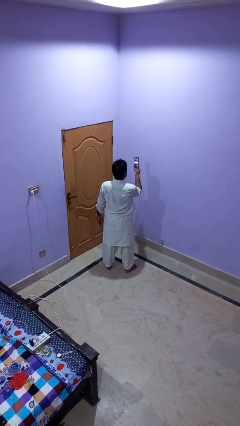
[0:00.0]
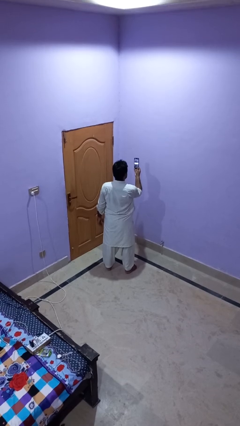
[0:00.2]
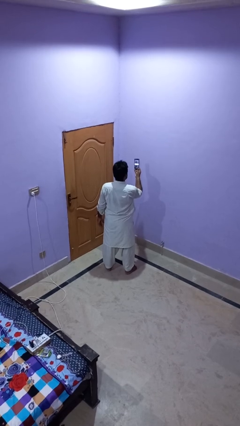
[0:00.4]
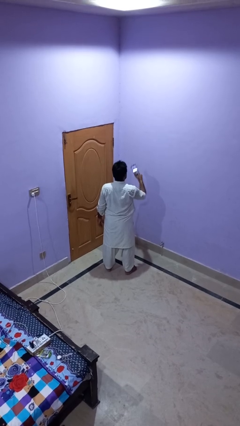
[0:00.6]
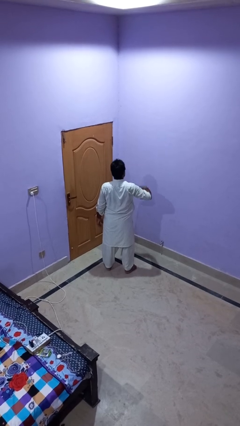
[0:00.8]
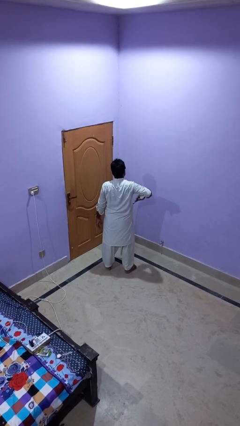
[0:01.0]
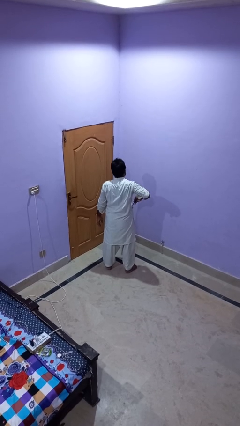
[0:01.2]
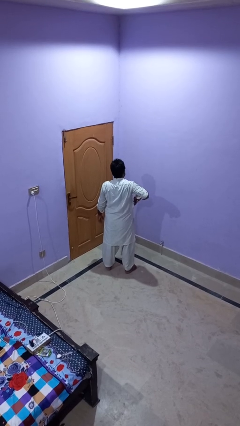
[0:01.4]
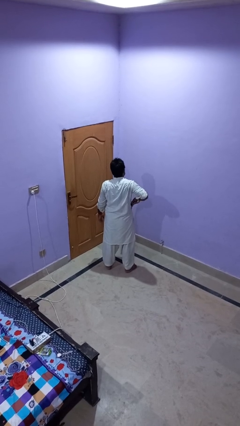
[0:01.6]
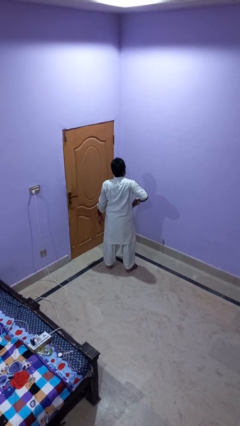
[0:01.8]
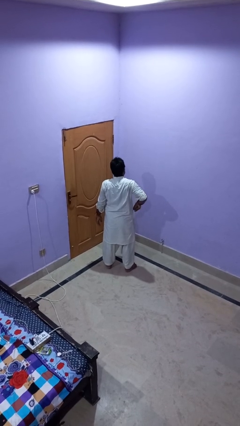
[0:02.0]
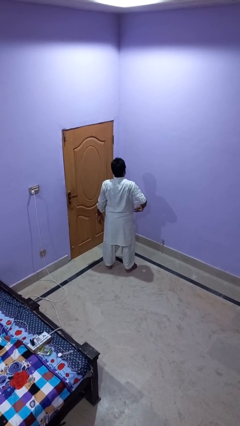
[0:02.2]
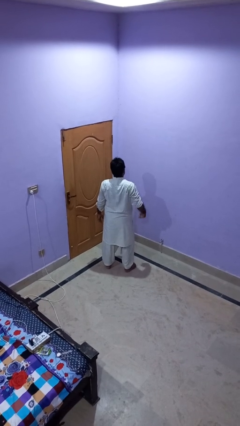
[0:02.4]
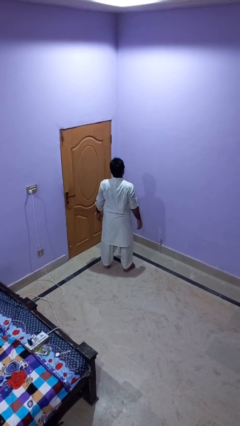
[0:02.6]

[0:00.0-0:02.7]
person puts phone into pocket

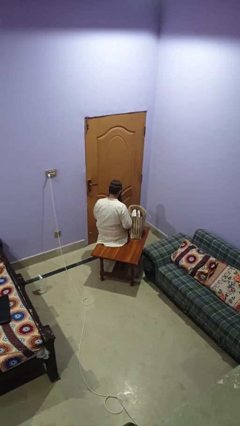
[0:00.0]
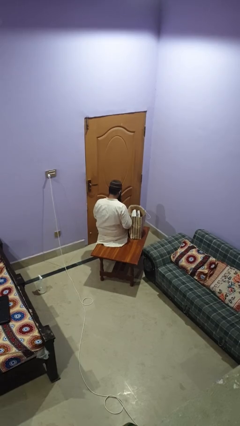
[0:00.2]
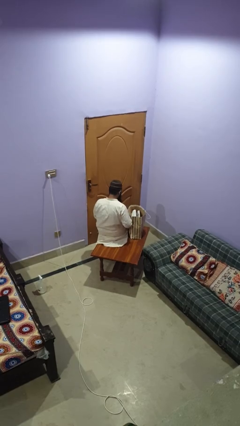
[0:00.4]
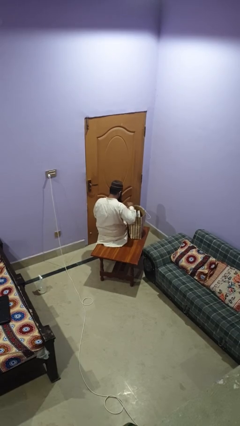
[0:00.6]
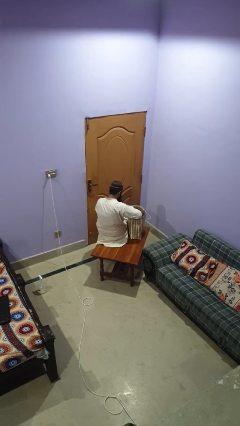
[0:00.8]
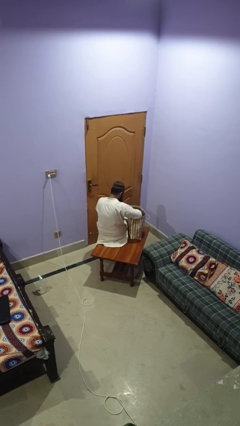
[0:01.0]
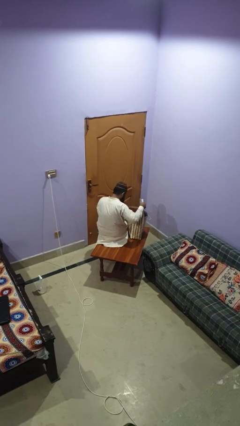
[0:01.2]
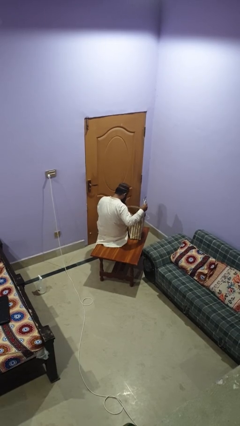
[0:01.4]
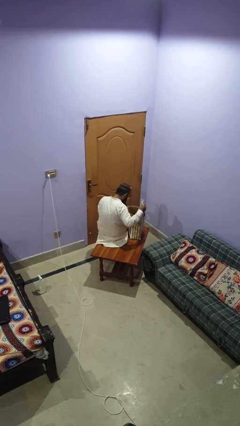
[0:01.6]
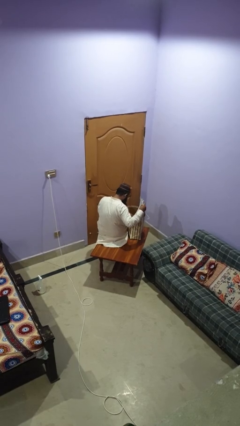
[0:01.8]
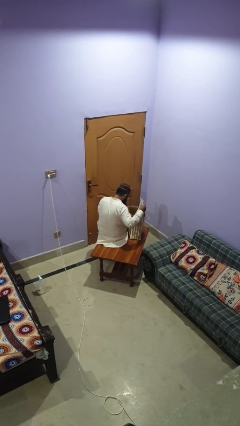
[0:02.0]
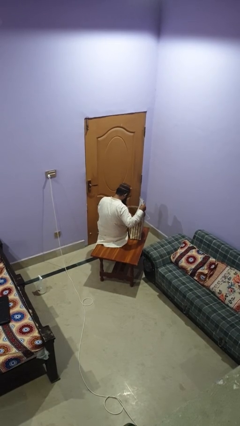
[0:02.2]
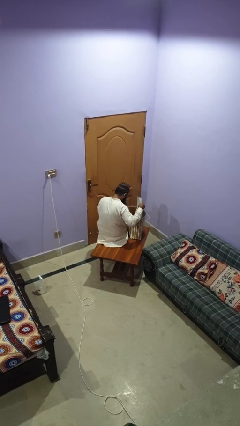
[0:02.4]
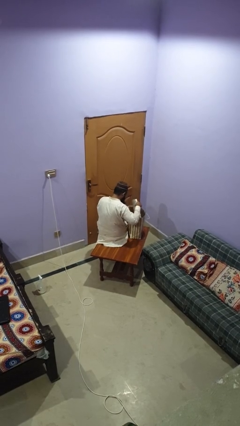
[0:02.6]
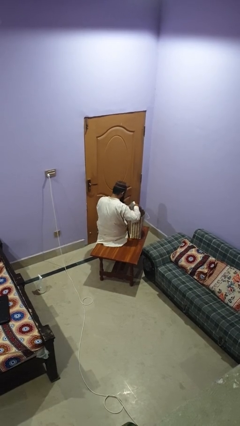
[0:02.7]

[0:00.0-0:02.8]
person searches in bag

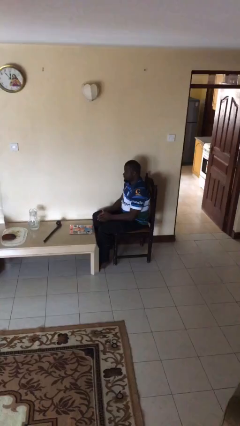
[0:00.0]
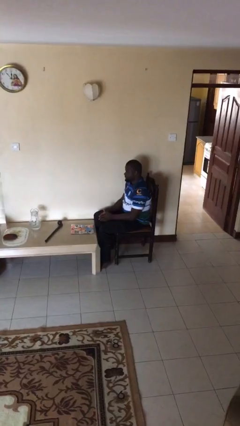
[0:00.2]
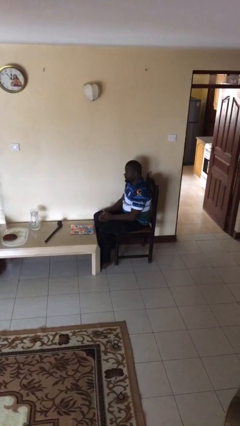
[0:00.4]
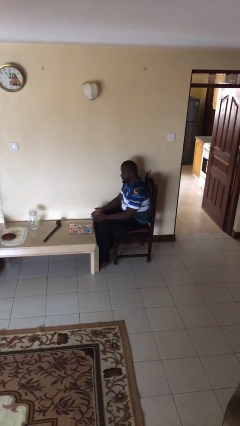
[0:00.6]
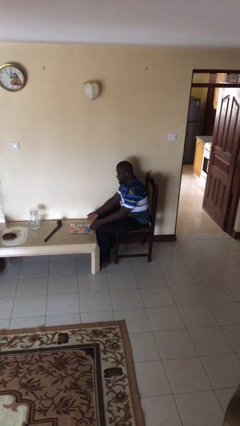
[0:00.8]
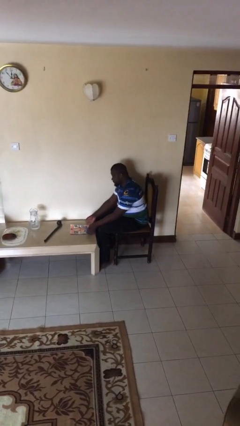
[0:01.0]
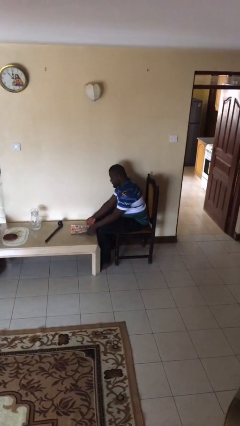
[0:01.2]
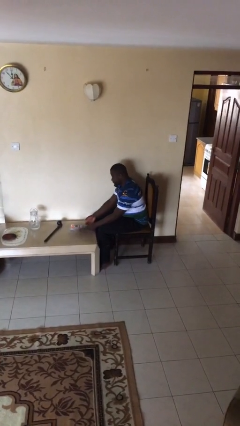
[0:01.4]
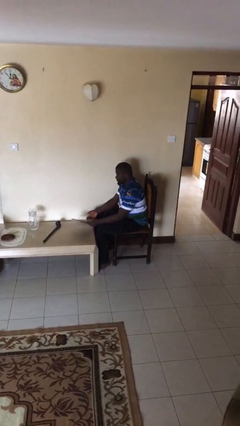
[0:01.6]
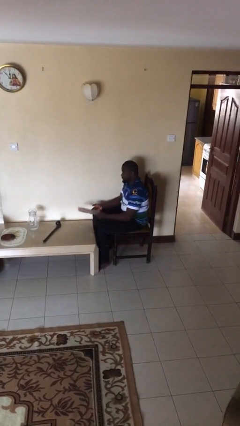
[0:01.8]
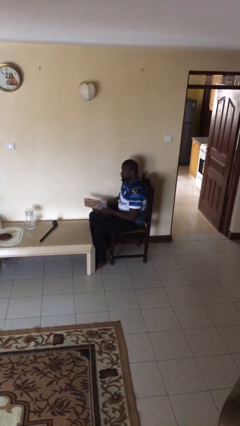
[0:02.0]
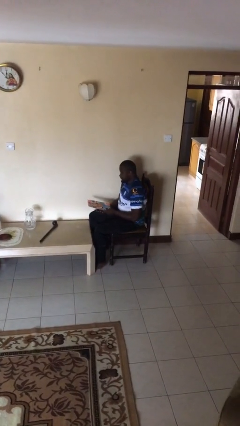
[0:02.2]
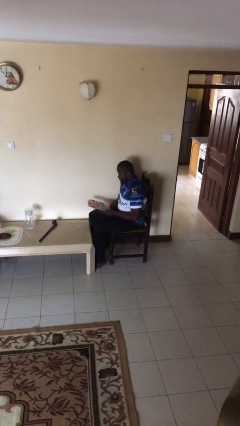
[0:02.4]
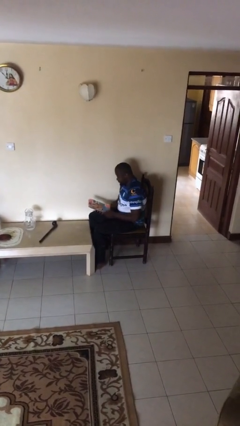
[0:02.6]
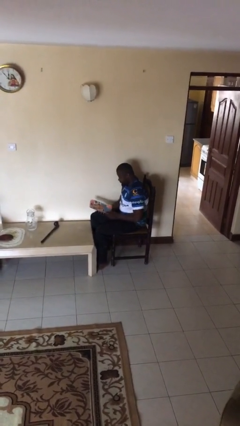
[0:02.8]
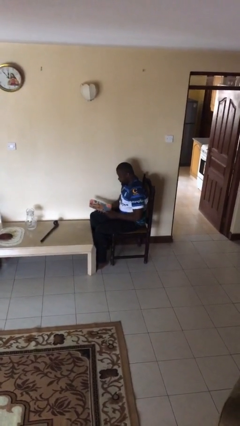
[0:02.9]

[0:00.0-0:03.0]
person picks up object from table

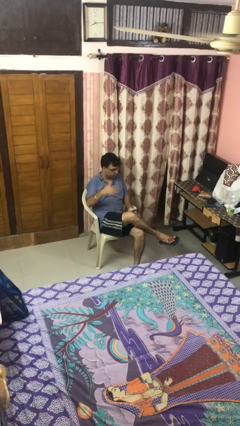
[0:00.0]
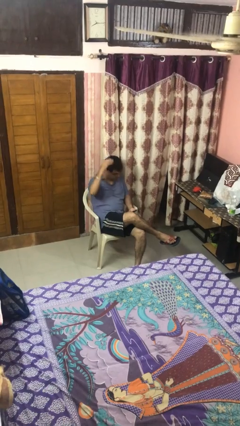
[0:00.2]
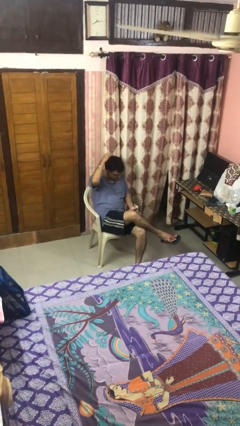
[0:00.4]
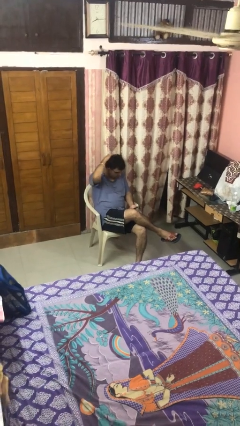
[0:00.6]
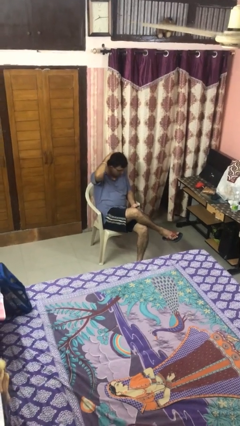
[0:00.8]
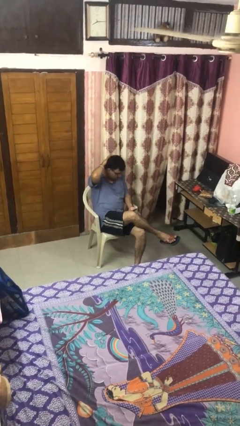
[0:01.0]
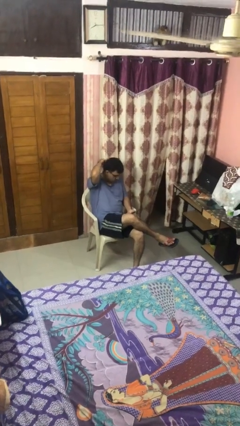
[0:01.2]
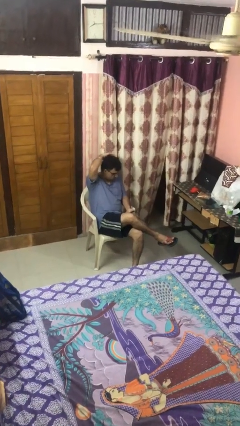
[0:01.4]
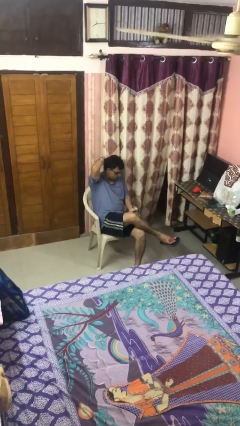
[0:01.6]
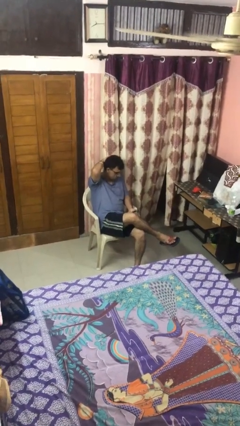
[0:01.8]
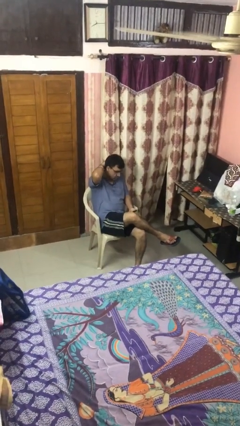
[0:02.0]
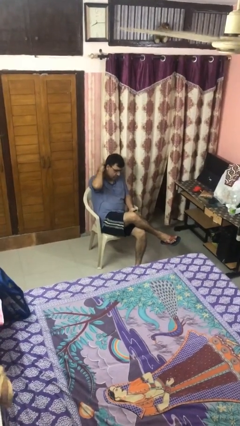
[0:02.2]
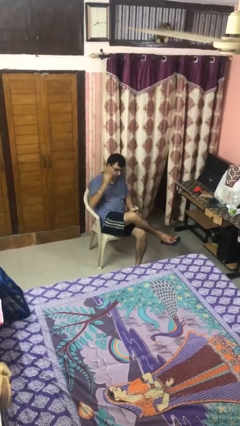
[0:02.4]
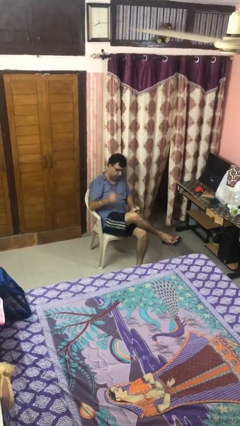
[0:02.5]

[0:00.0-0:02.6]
person strokes hair

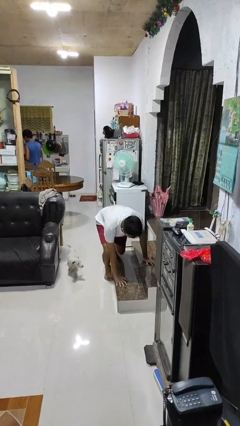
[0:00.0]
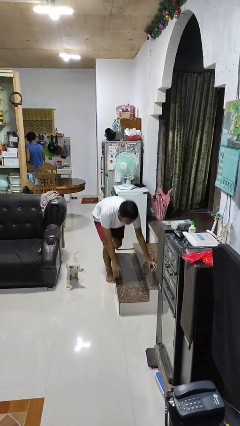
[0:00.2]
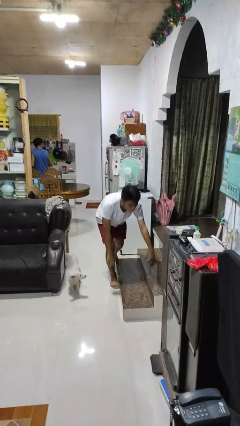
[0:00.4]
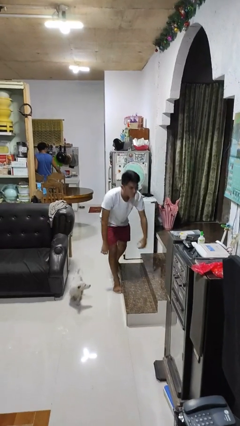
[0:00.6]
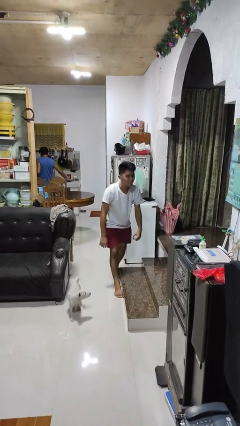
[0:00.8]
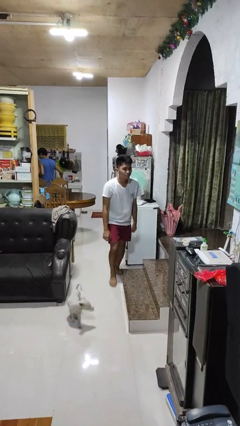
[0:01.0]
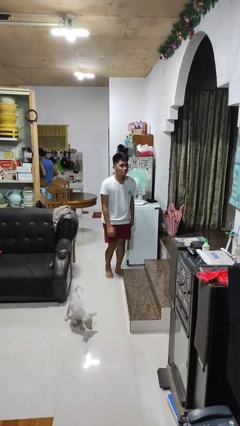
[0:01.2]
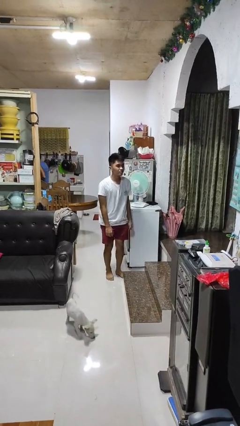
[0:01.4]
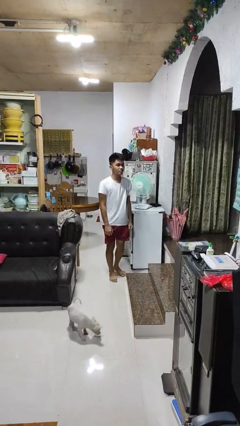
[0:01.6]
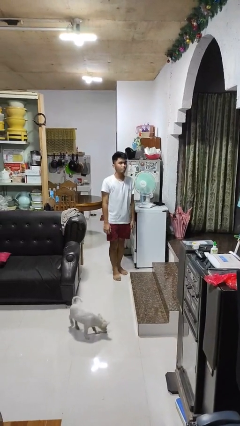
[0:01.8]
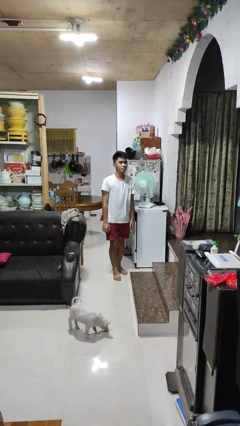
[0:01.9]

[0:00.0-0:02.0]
person stands up from floor

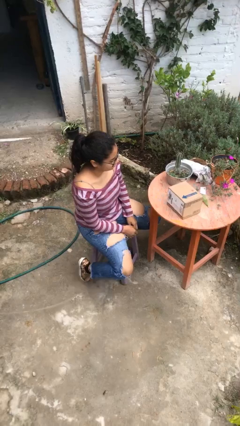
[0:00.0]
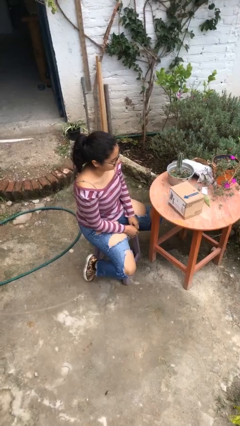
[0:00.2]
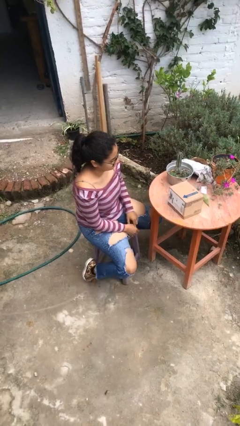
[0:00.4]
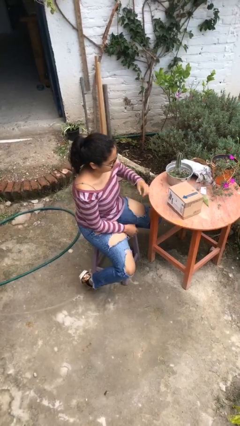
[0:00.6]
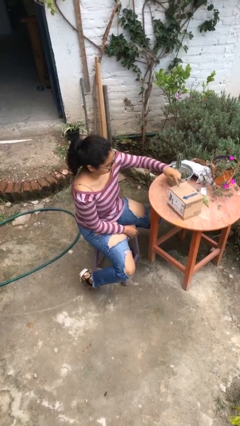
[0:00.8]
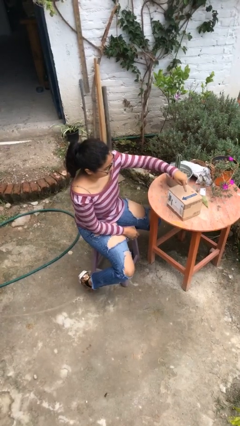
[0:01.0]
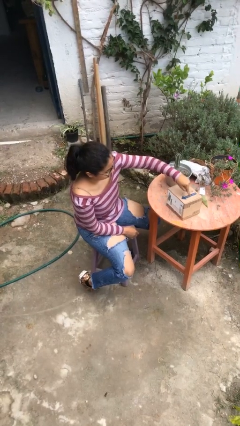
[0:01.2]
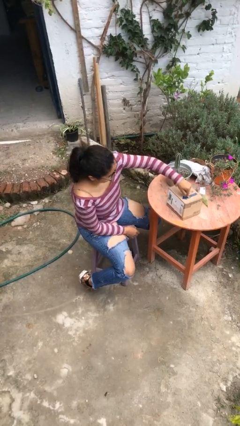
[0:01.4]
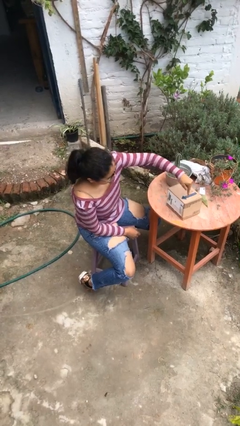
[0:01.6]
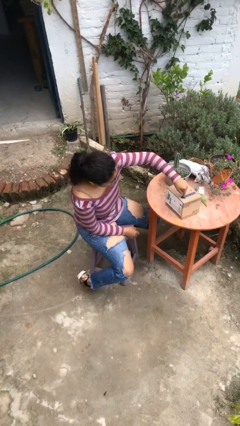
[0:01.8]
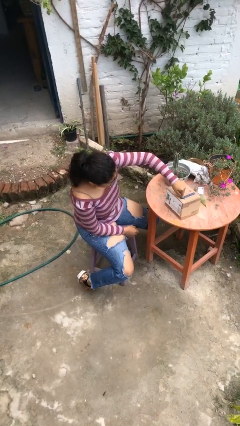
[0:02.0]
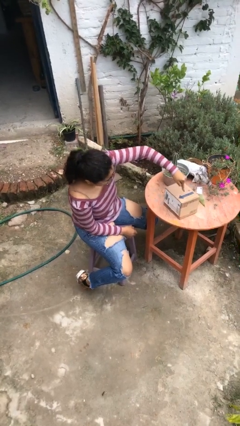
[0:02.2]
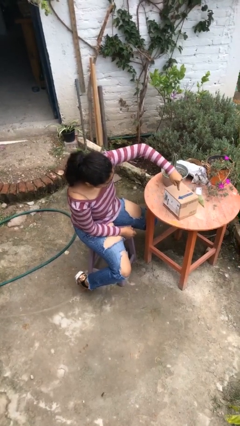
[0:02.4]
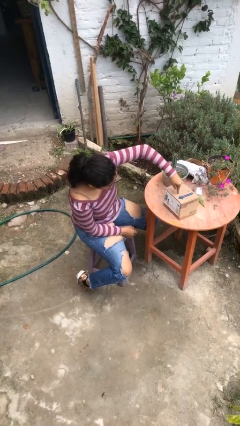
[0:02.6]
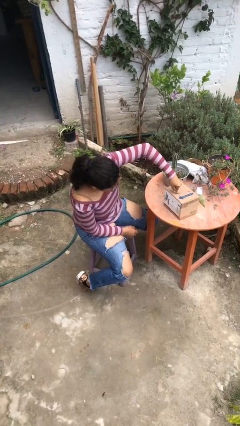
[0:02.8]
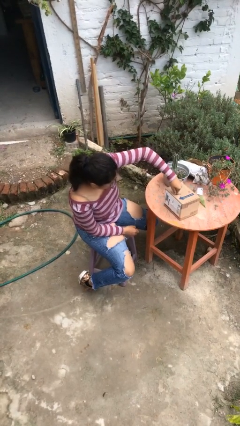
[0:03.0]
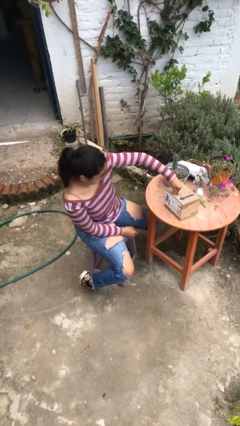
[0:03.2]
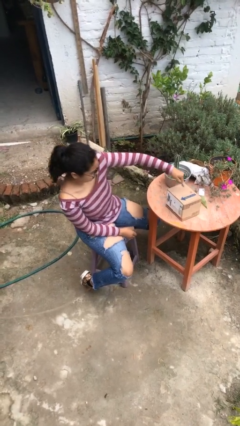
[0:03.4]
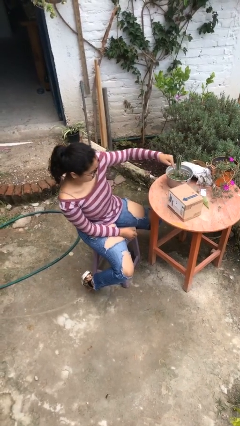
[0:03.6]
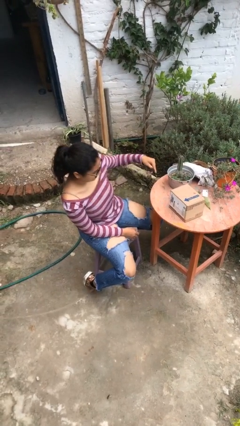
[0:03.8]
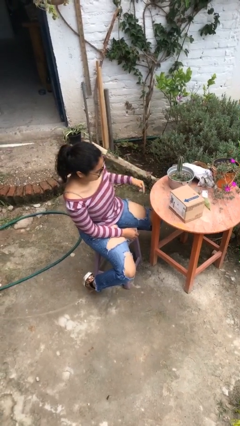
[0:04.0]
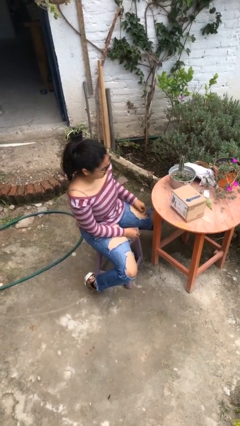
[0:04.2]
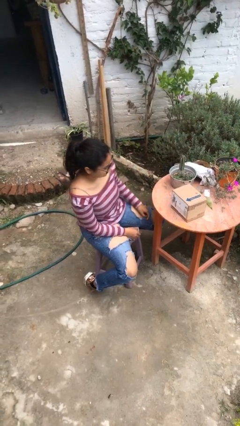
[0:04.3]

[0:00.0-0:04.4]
person taps object with finger
